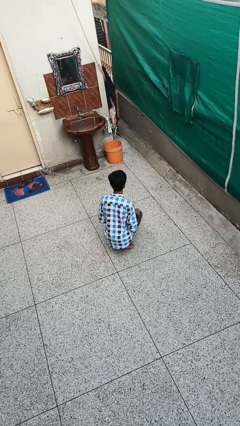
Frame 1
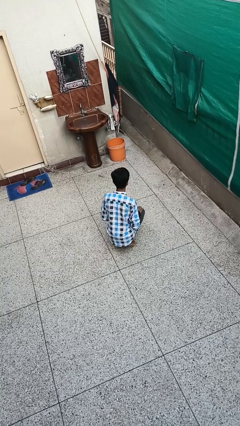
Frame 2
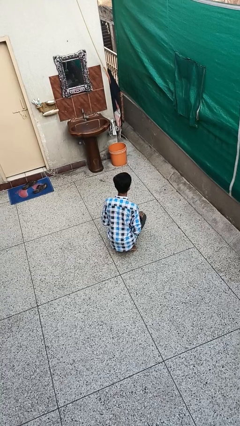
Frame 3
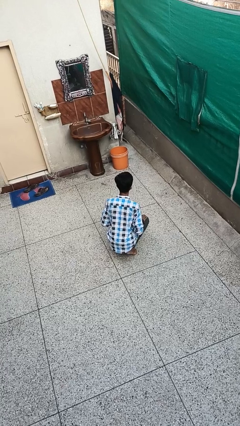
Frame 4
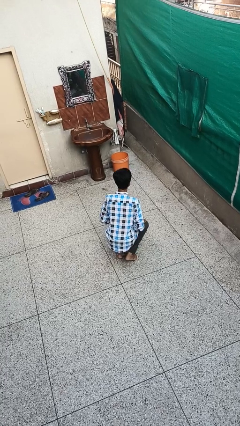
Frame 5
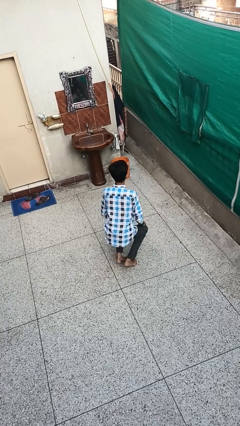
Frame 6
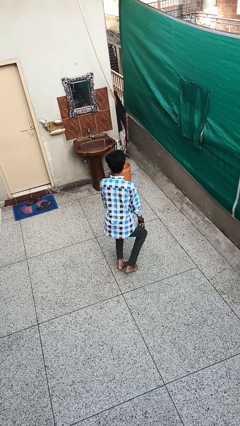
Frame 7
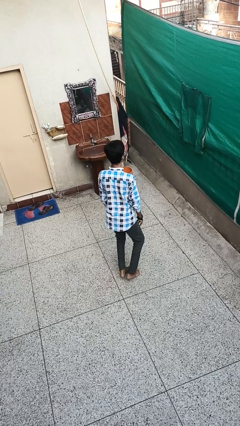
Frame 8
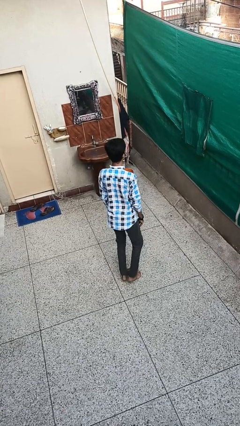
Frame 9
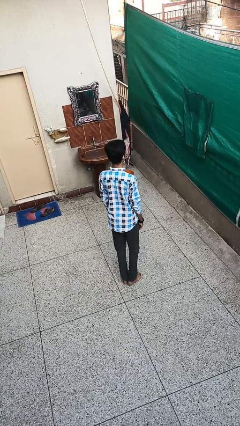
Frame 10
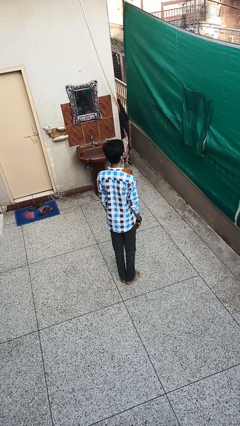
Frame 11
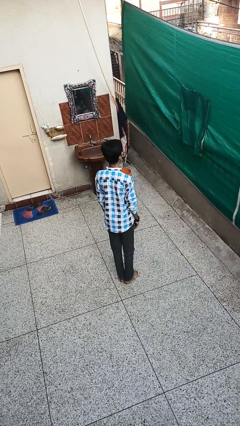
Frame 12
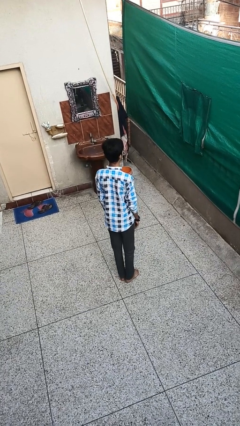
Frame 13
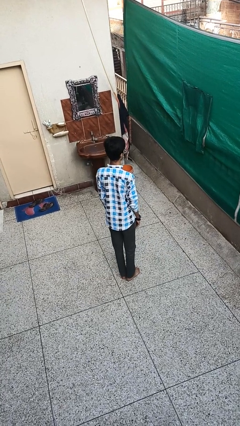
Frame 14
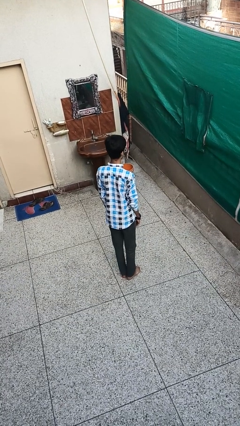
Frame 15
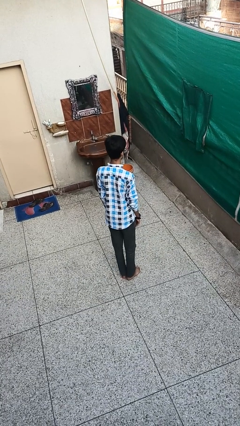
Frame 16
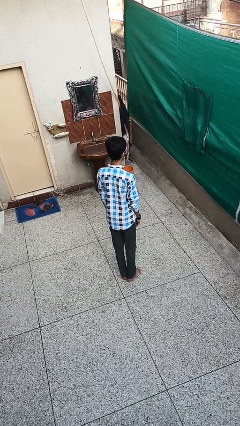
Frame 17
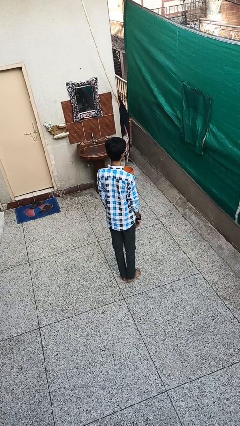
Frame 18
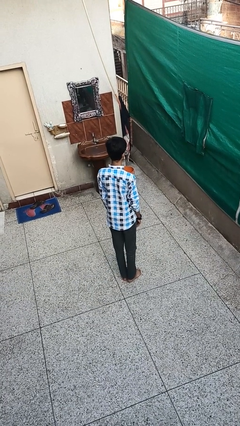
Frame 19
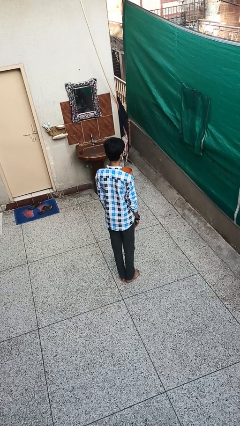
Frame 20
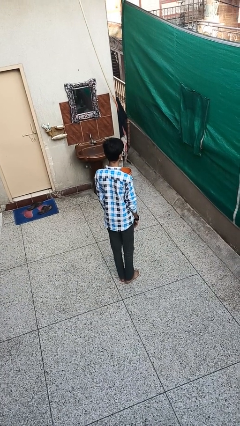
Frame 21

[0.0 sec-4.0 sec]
person stands up

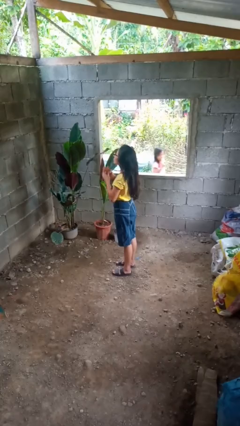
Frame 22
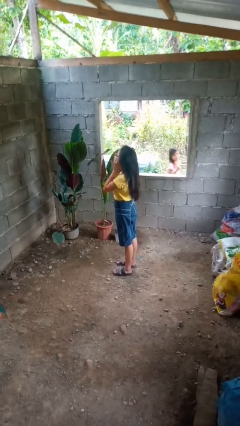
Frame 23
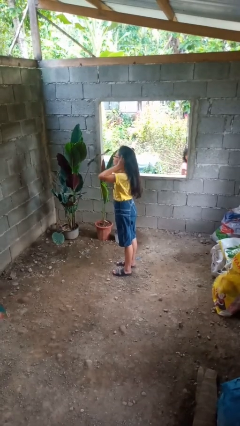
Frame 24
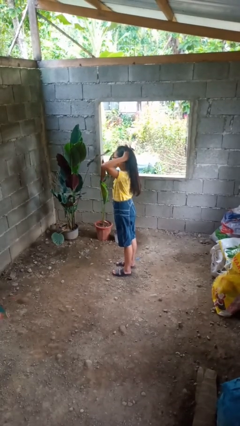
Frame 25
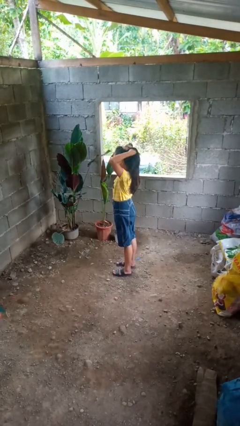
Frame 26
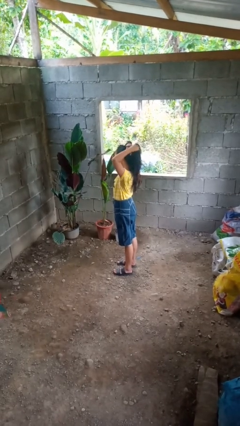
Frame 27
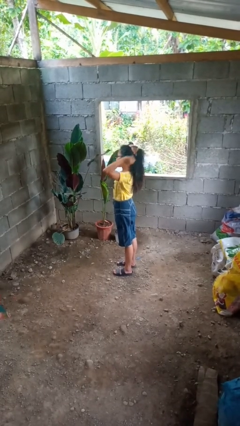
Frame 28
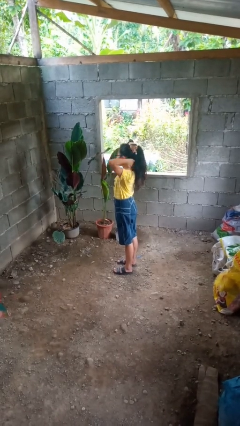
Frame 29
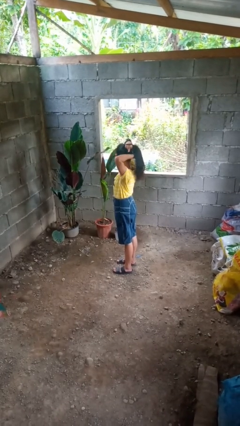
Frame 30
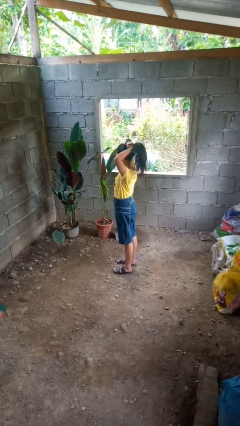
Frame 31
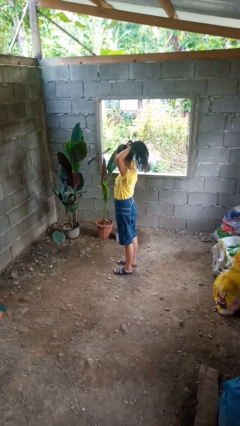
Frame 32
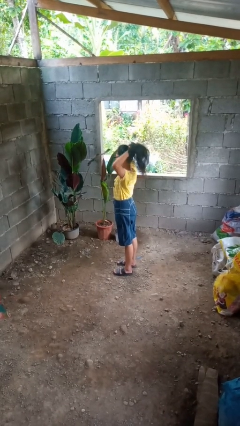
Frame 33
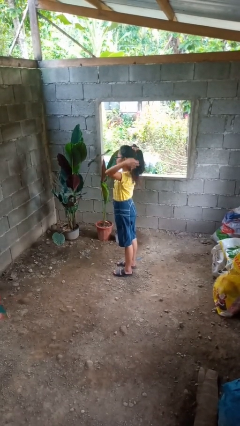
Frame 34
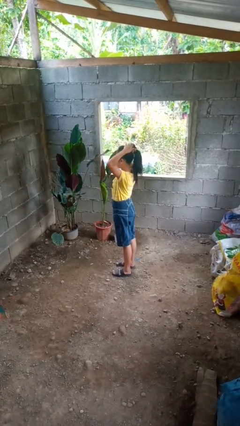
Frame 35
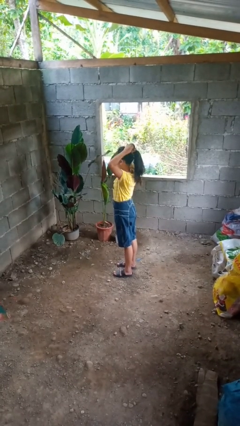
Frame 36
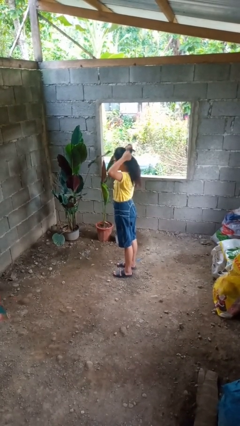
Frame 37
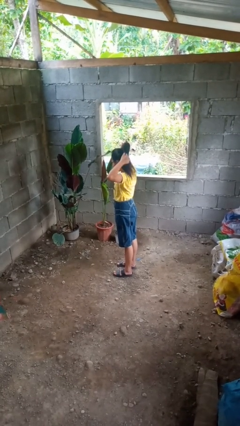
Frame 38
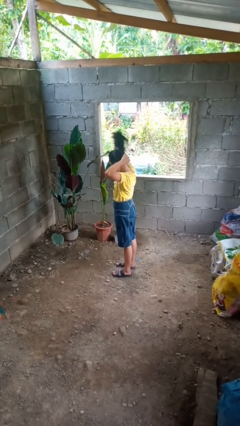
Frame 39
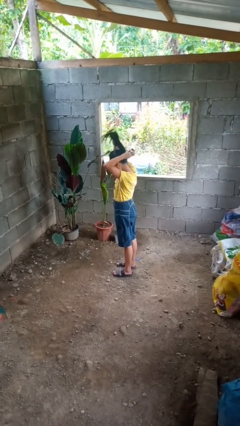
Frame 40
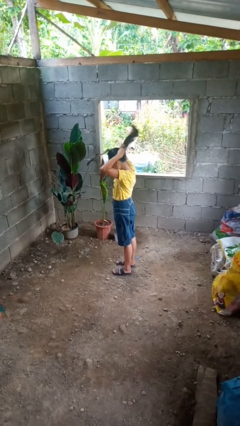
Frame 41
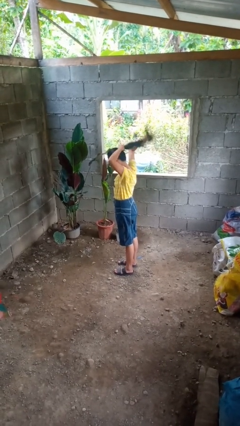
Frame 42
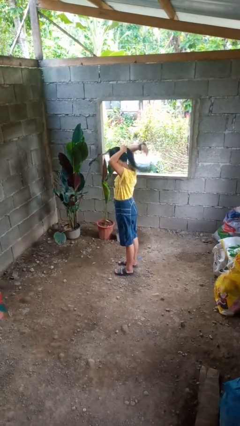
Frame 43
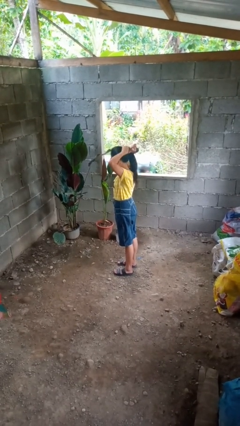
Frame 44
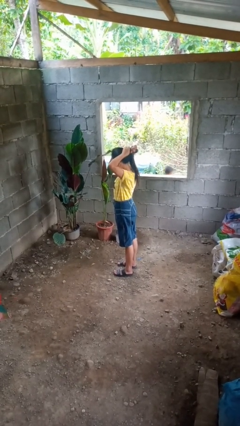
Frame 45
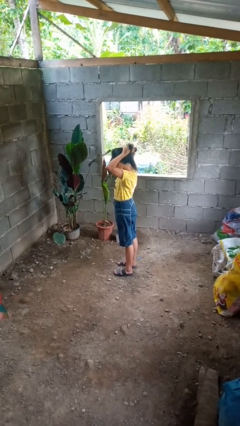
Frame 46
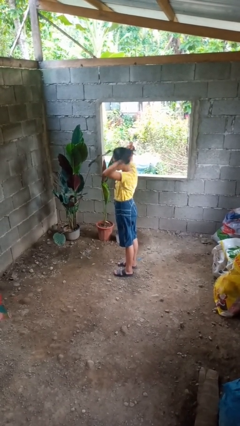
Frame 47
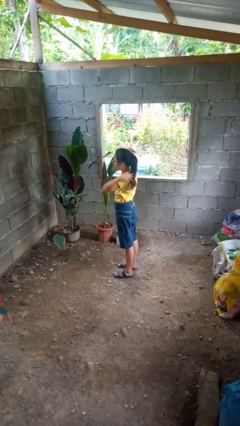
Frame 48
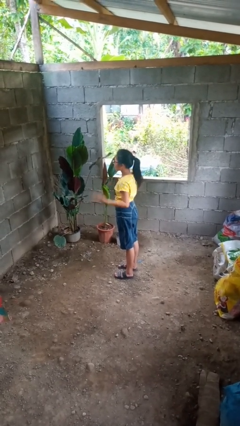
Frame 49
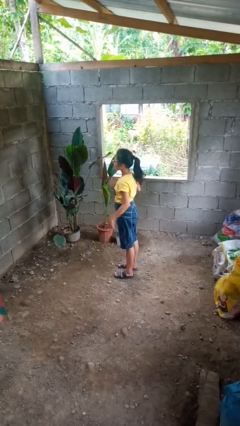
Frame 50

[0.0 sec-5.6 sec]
person puts hair in ponytail

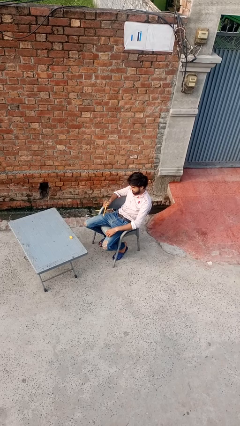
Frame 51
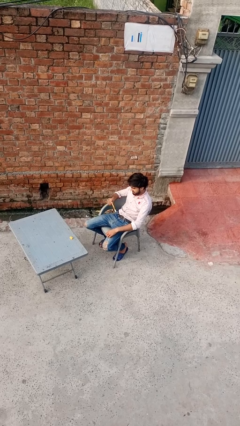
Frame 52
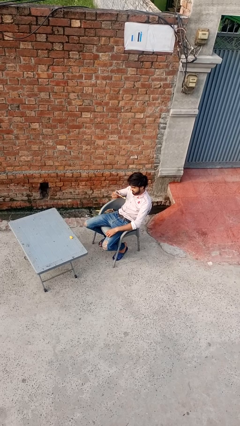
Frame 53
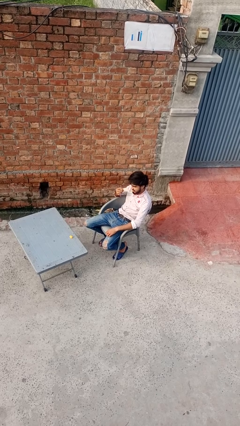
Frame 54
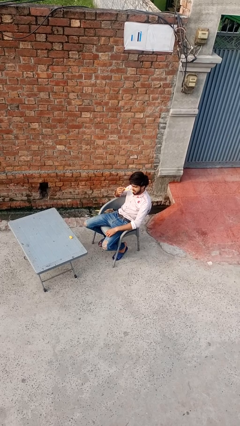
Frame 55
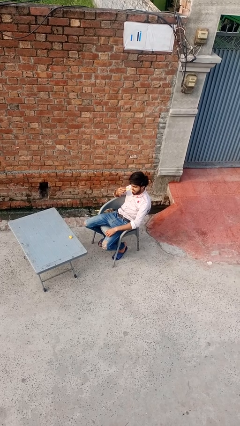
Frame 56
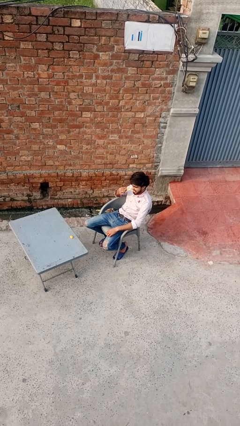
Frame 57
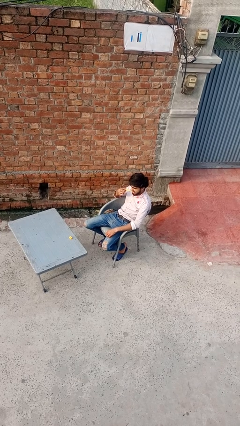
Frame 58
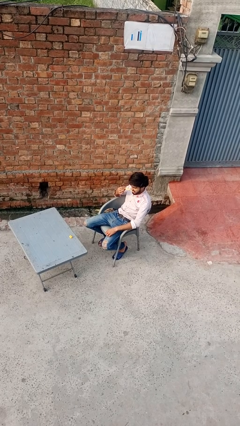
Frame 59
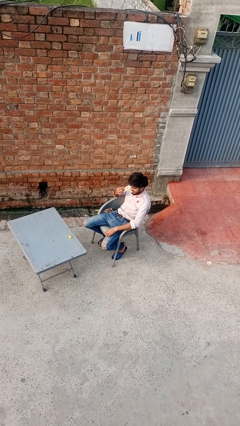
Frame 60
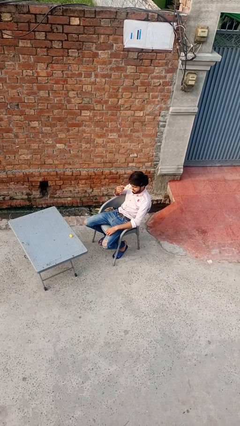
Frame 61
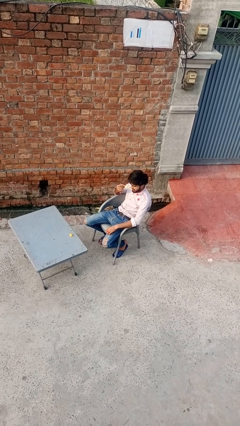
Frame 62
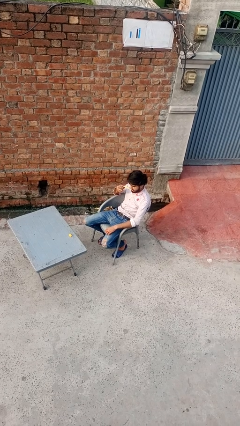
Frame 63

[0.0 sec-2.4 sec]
person brushes teeth

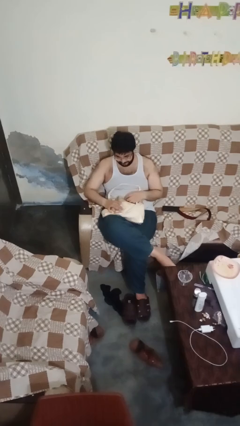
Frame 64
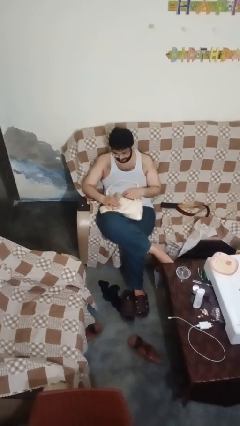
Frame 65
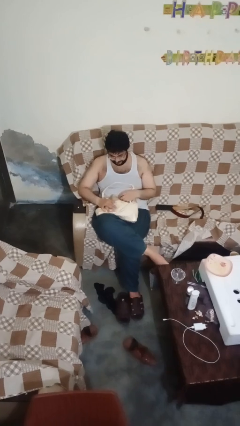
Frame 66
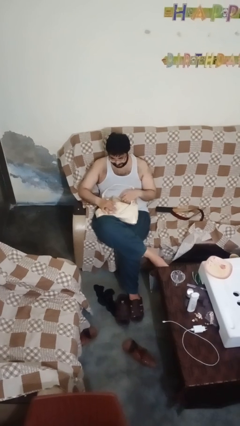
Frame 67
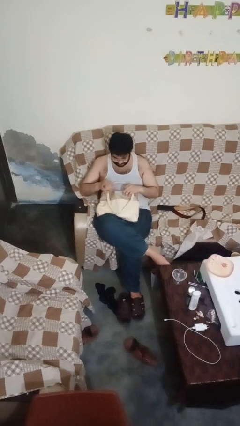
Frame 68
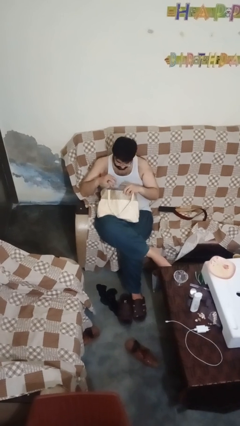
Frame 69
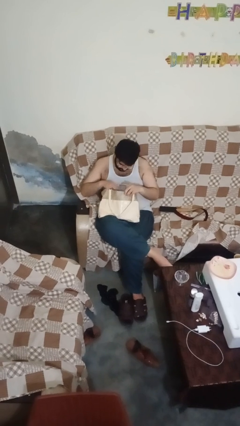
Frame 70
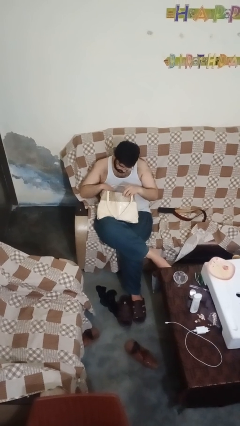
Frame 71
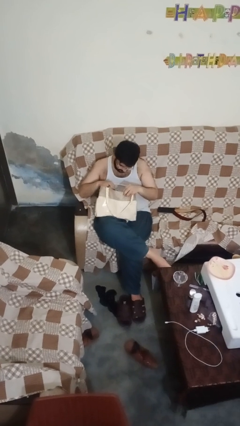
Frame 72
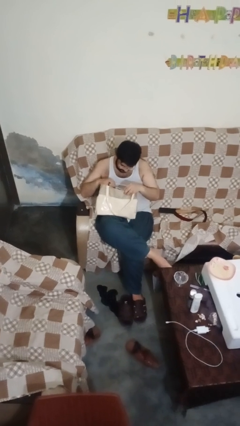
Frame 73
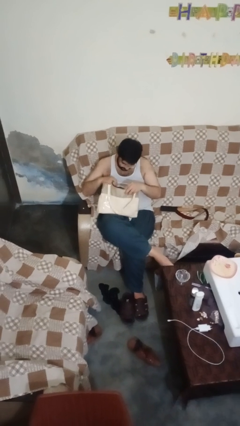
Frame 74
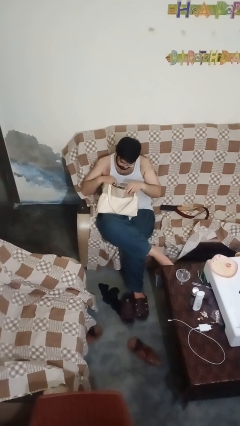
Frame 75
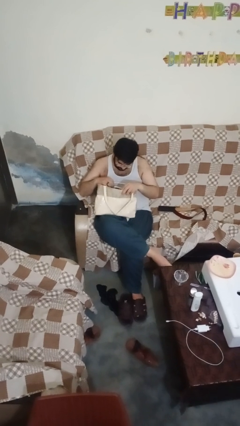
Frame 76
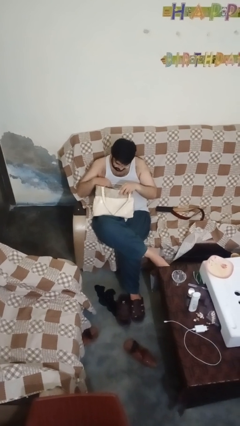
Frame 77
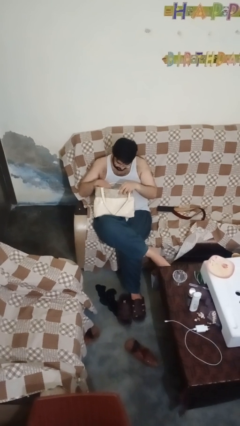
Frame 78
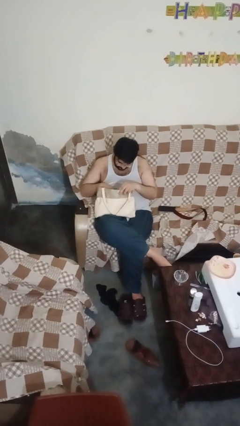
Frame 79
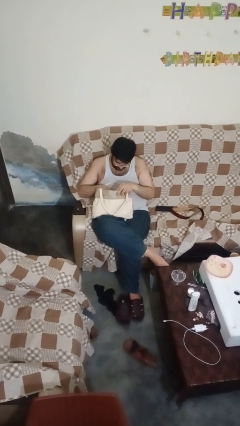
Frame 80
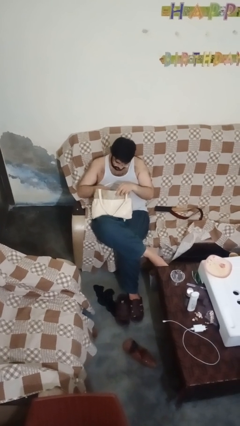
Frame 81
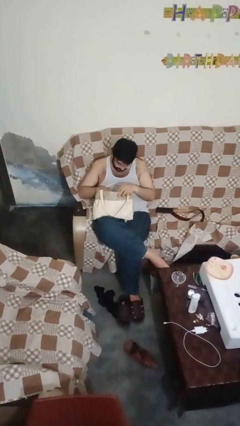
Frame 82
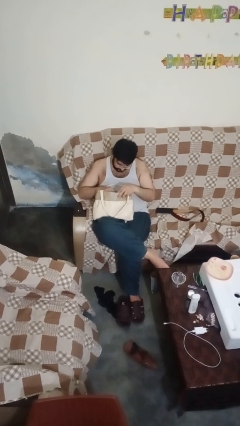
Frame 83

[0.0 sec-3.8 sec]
person searches in purse

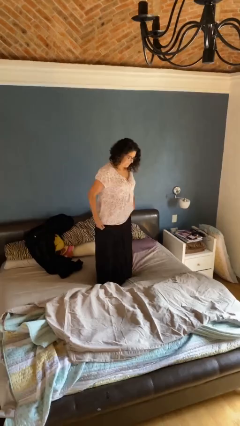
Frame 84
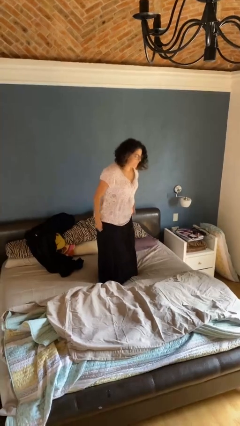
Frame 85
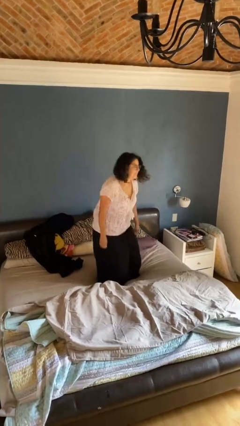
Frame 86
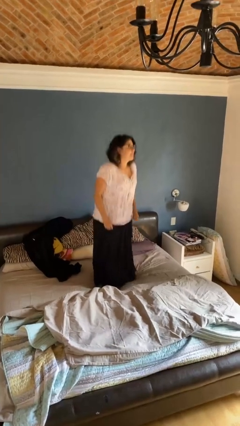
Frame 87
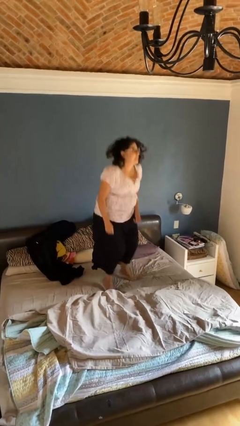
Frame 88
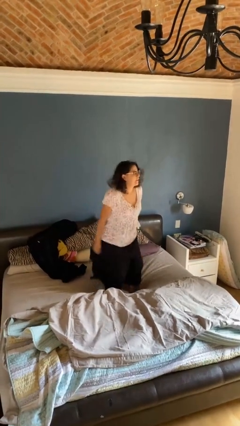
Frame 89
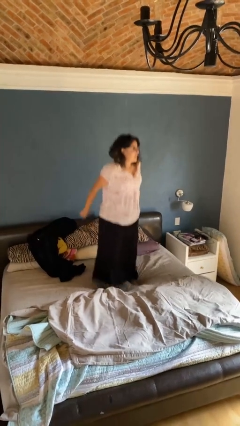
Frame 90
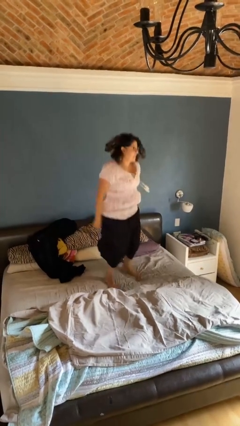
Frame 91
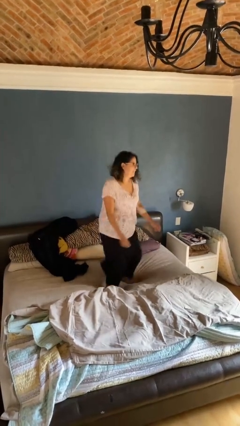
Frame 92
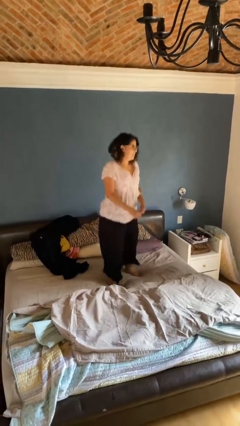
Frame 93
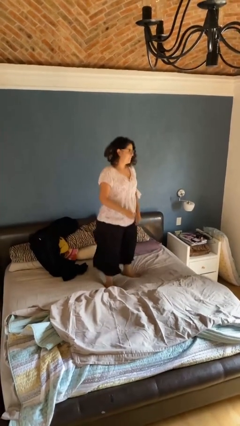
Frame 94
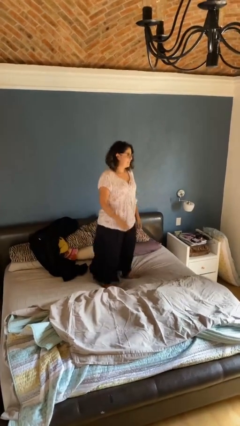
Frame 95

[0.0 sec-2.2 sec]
person jumps on bed
